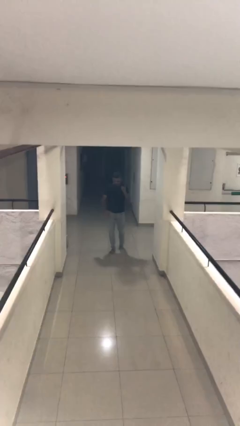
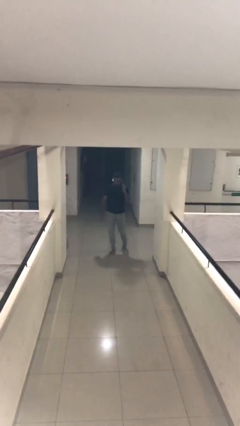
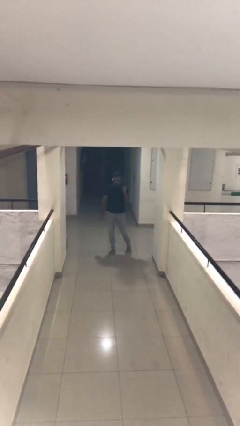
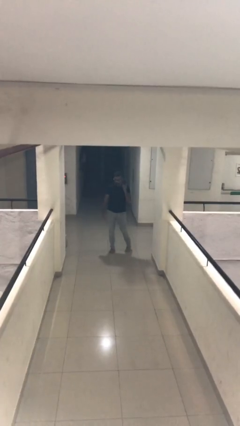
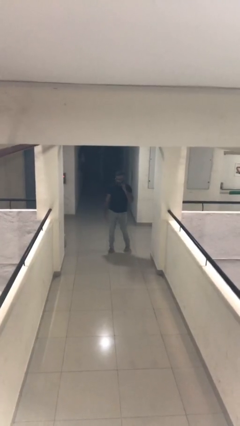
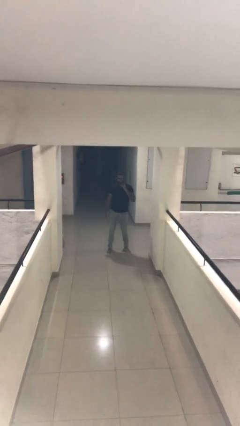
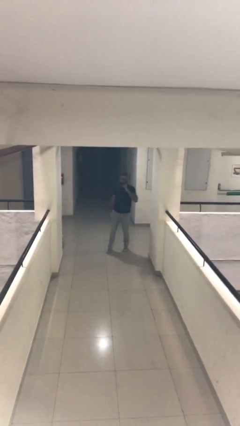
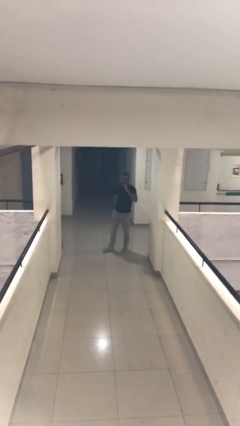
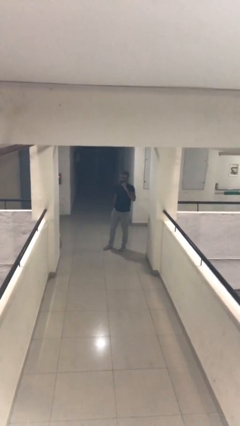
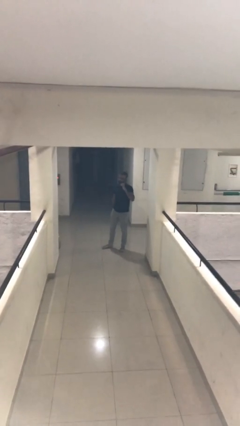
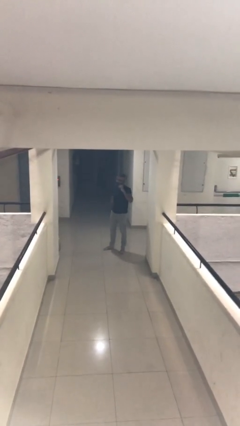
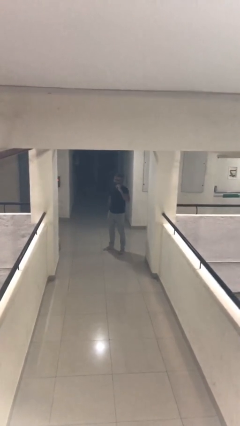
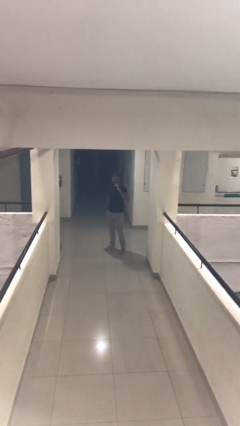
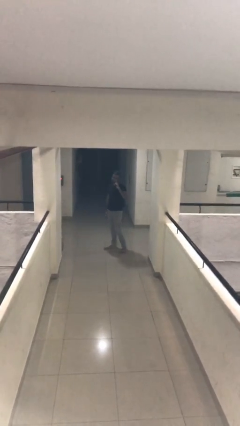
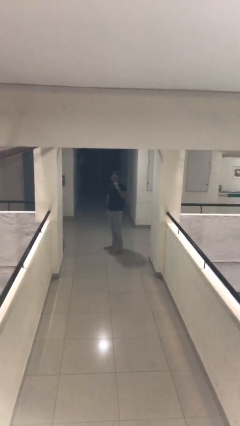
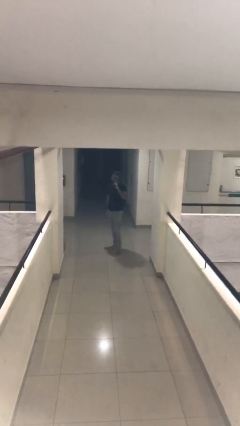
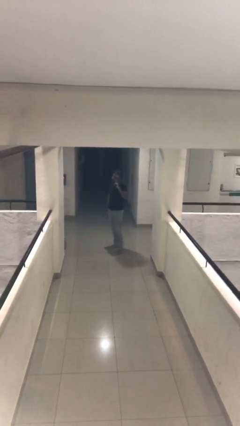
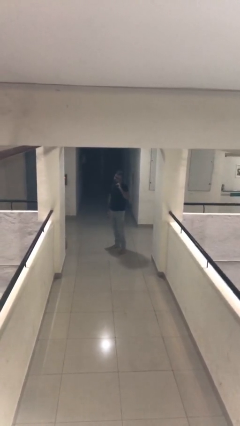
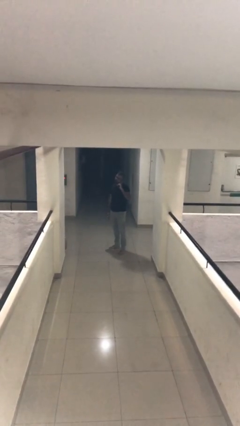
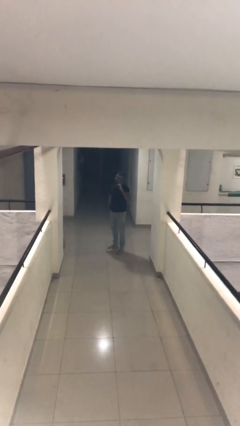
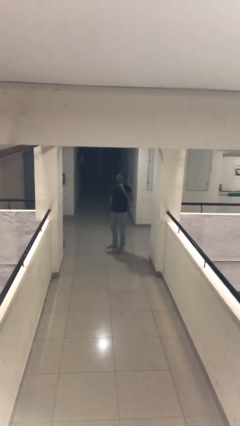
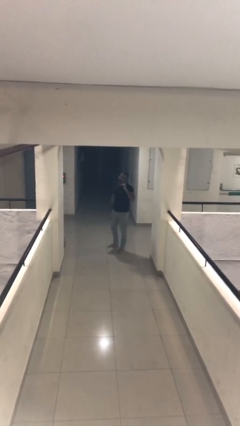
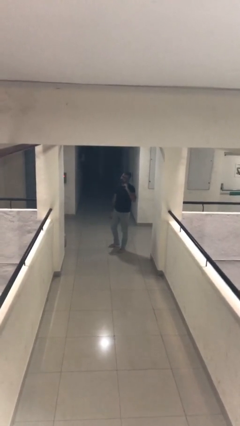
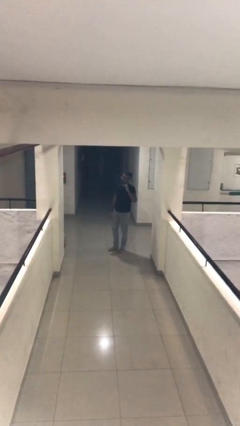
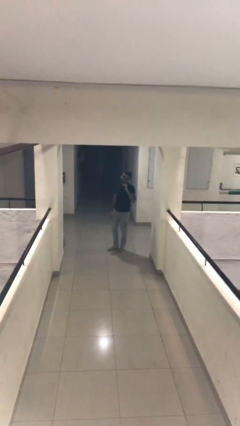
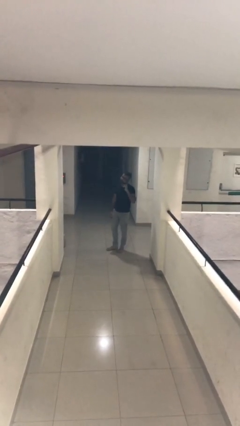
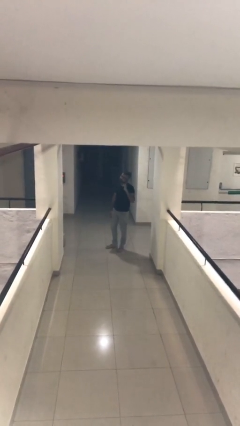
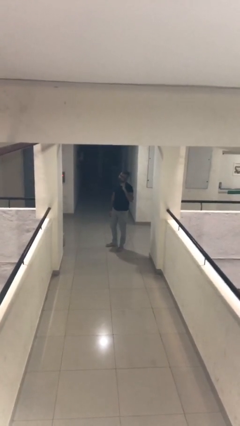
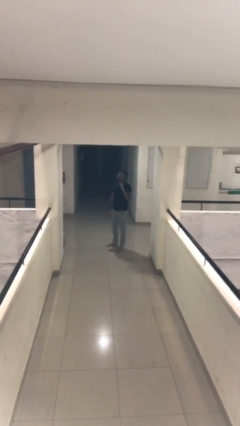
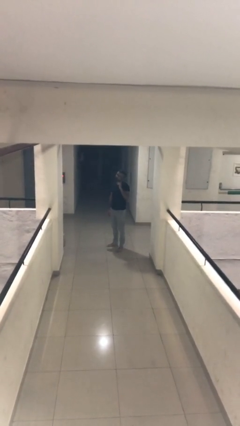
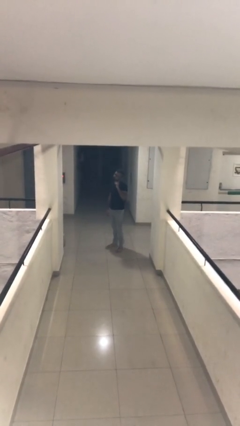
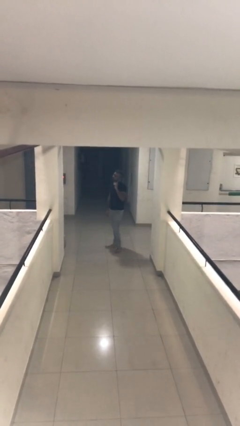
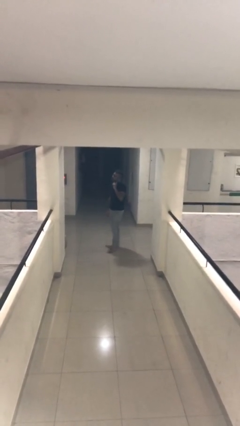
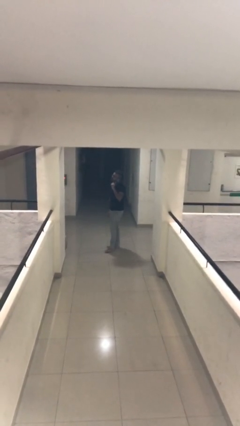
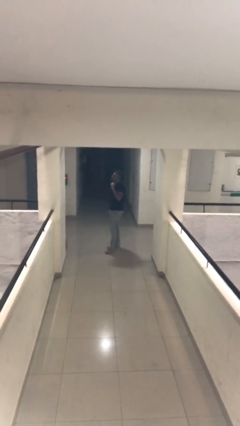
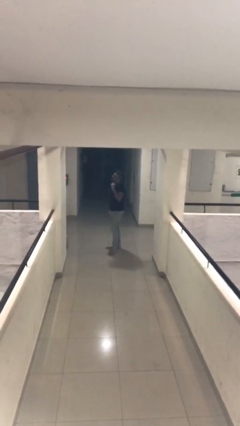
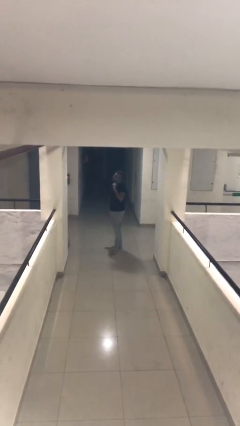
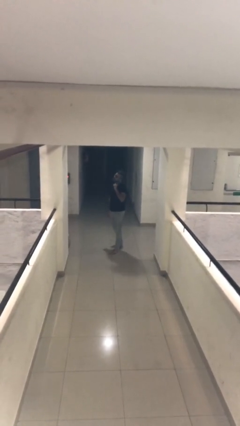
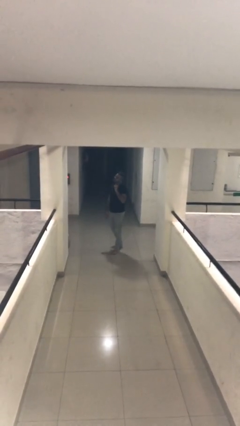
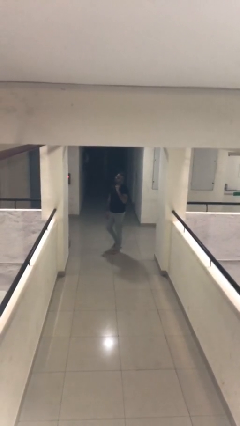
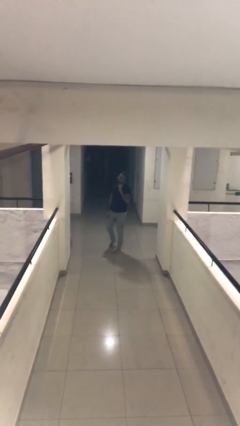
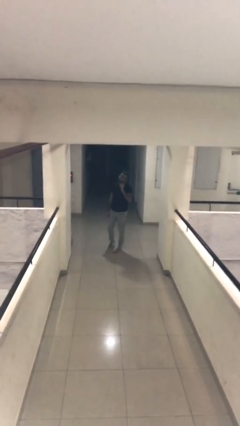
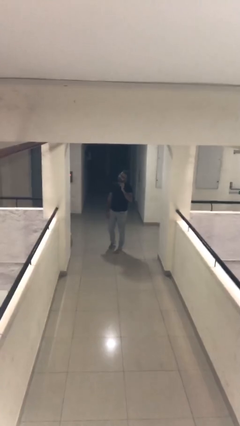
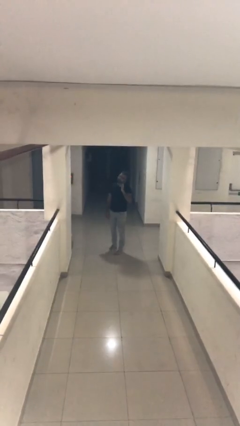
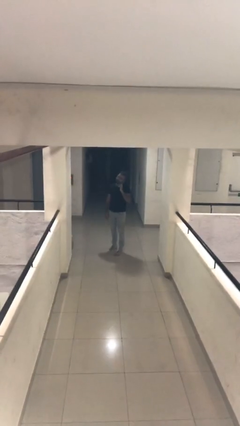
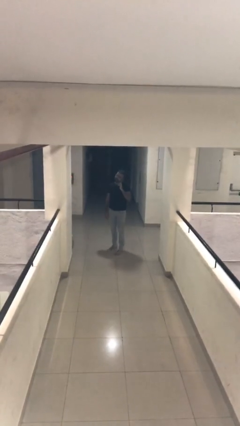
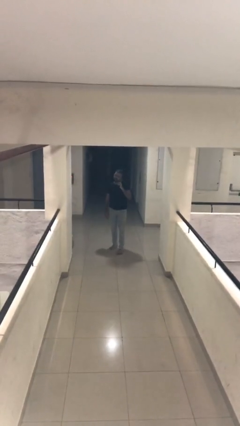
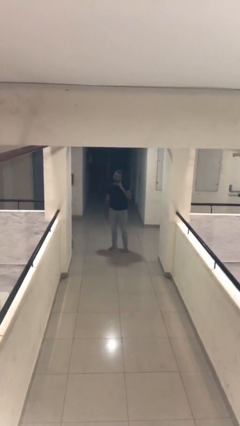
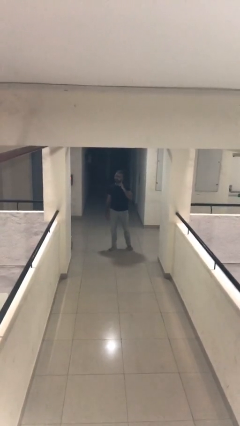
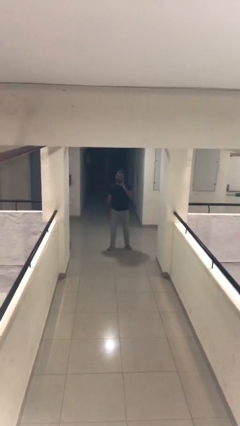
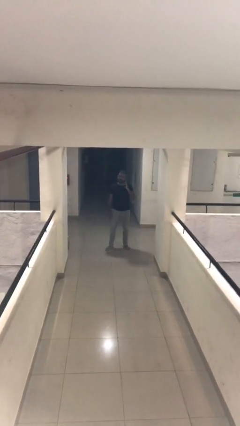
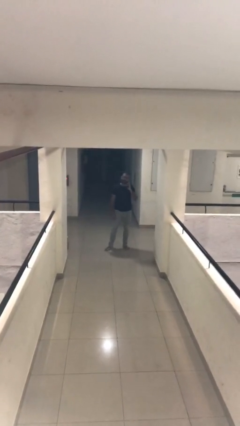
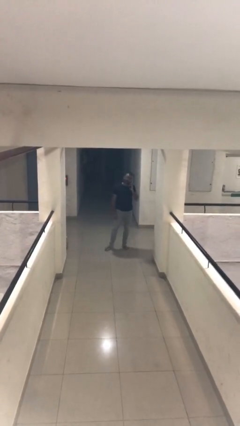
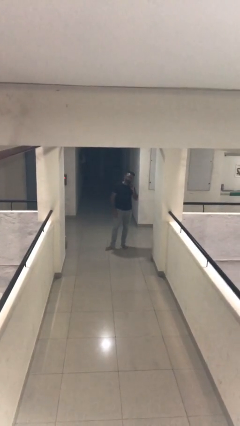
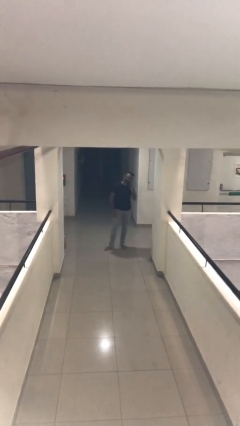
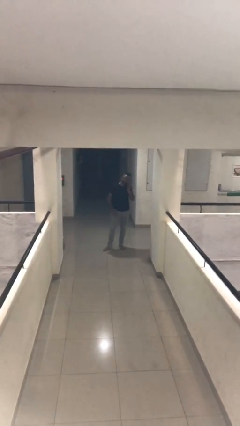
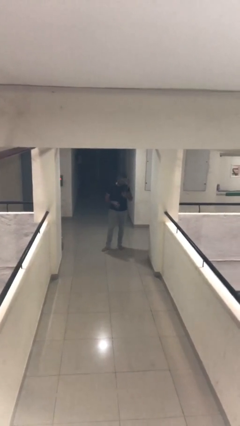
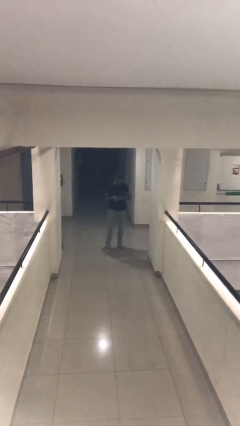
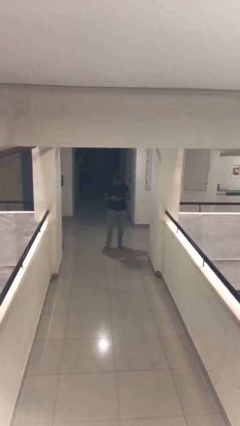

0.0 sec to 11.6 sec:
person talks on phone

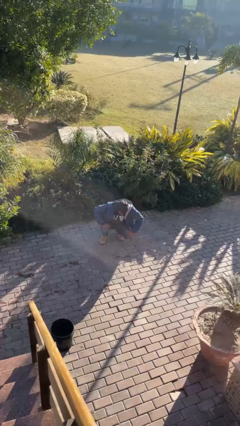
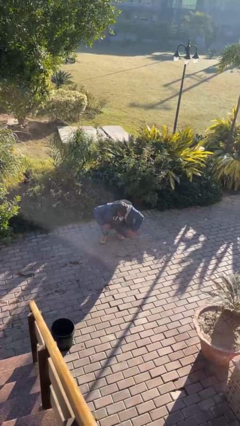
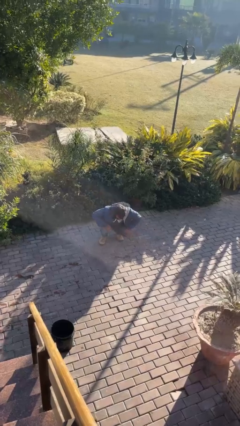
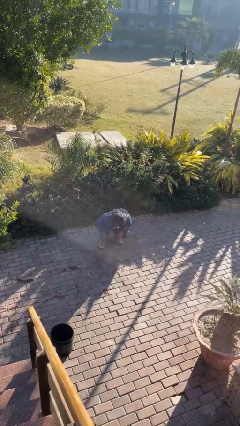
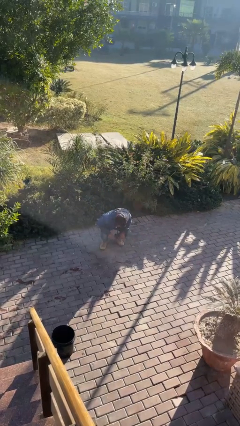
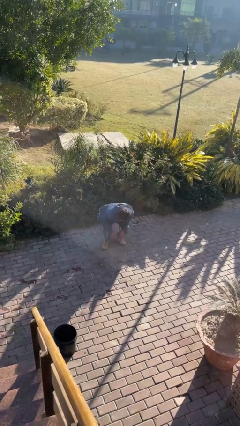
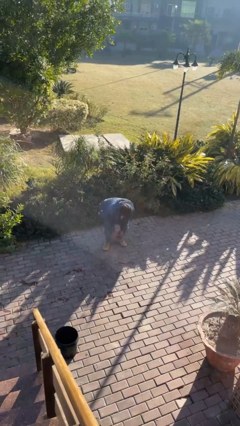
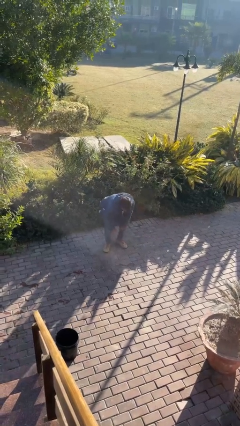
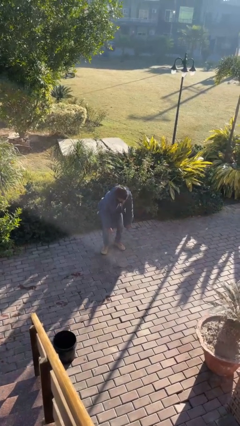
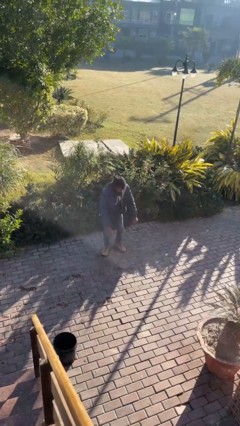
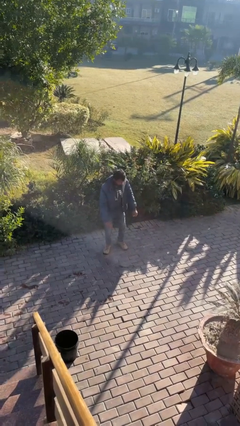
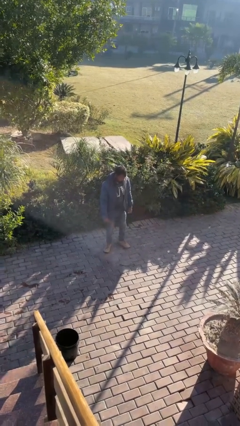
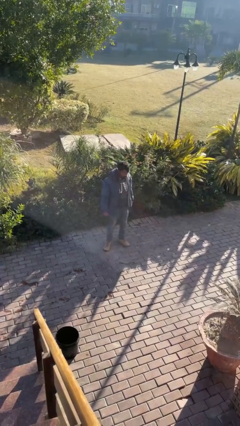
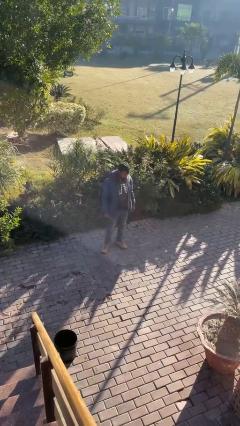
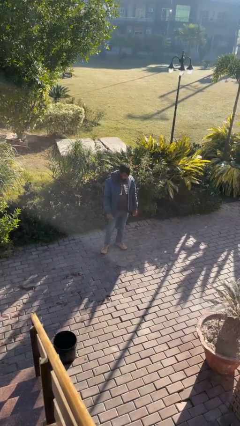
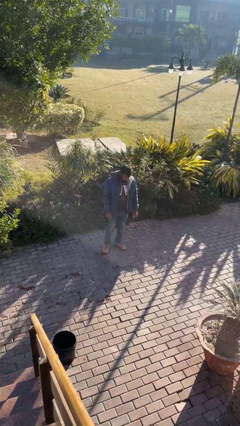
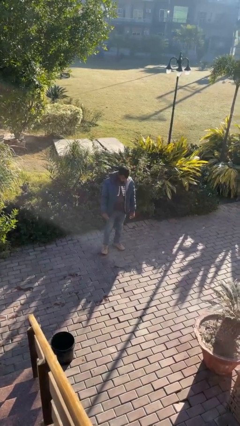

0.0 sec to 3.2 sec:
person stands up

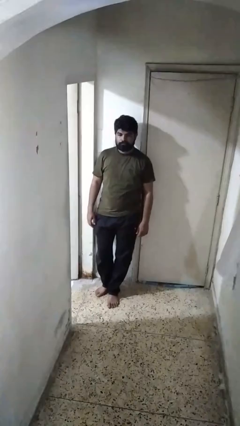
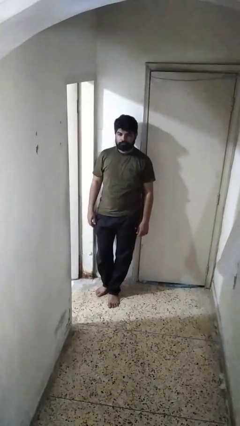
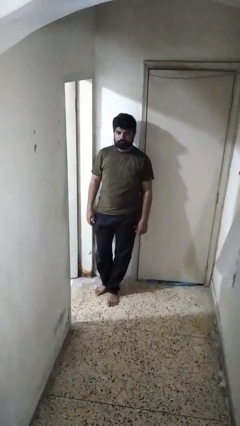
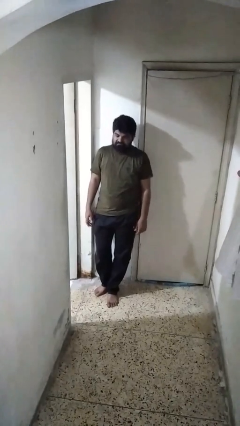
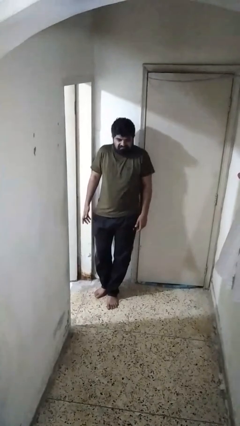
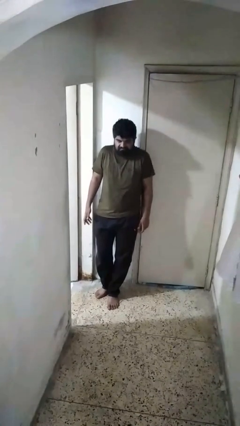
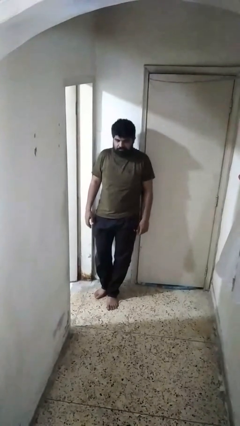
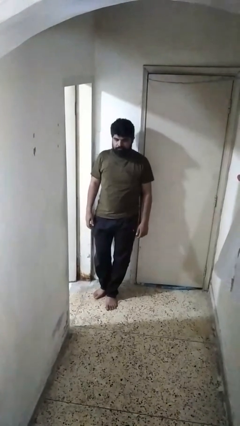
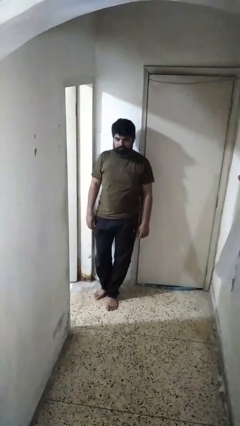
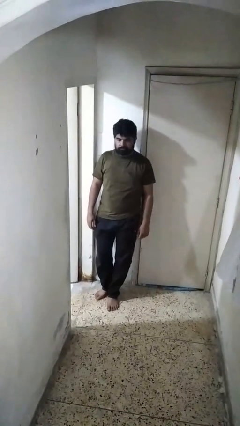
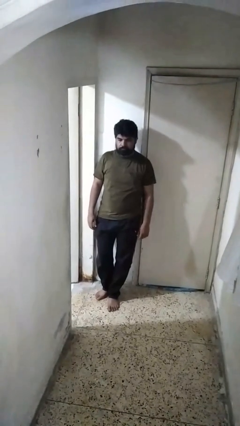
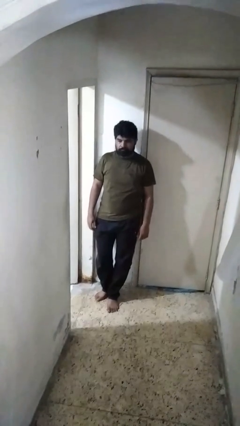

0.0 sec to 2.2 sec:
person shrugs

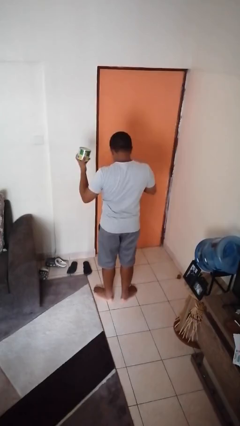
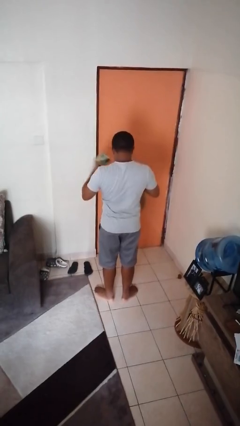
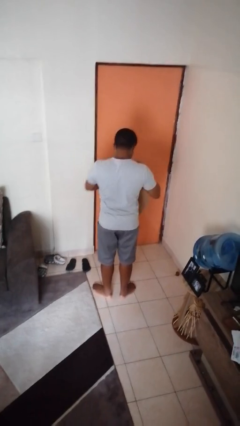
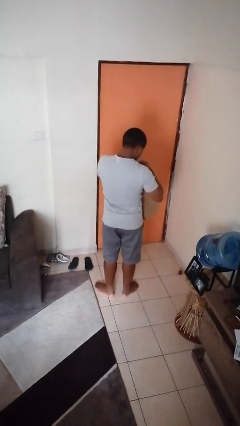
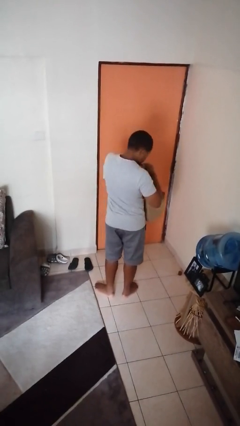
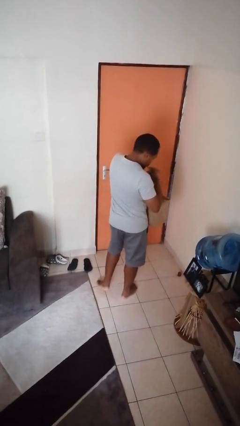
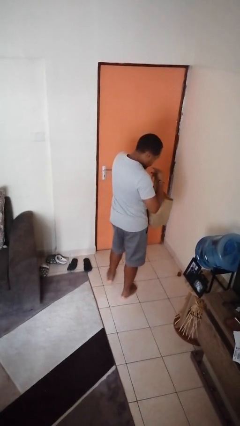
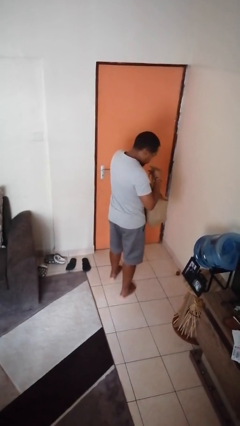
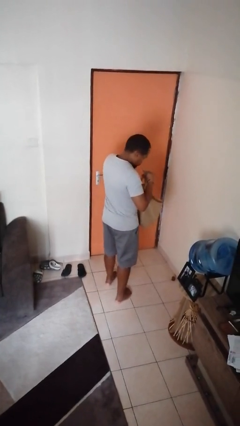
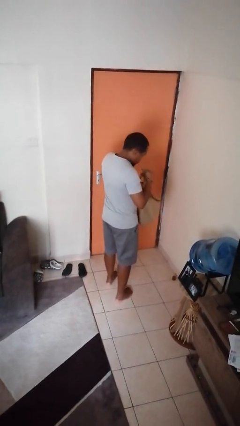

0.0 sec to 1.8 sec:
person puts object into bag
